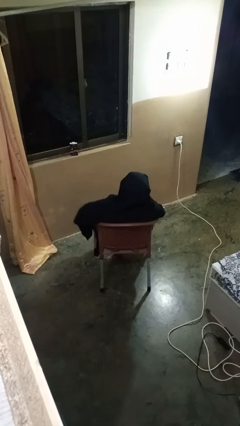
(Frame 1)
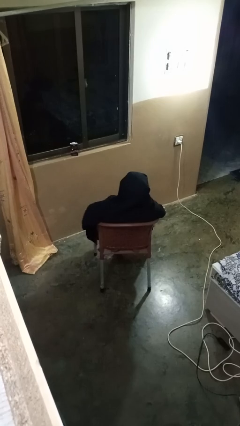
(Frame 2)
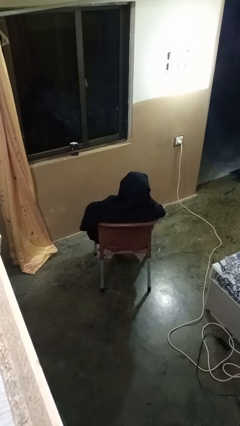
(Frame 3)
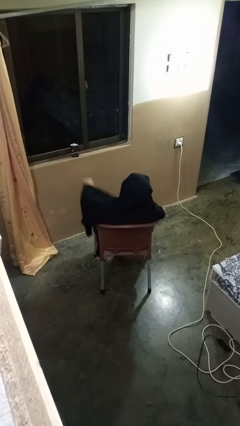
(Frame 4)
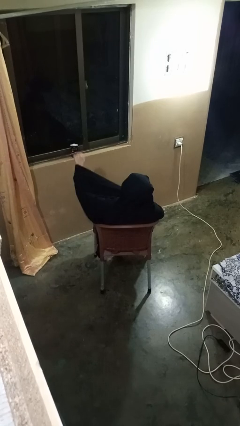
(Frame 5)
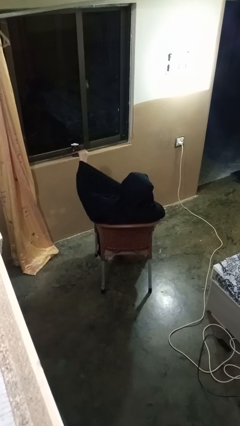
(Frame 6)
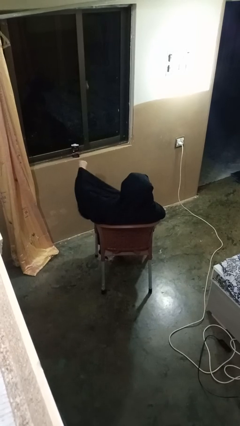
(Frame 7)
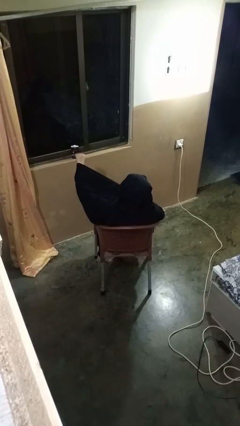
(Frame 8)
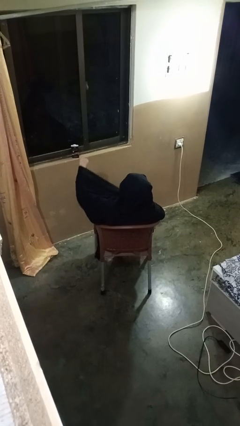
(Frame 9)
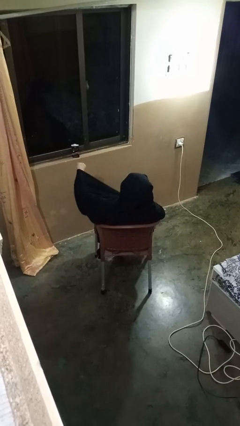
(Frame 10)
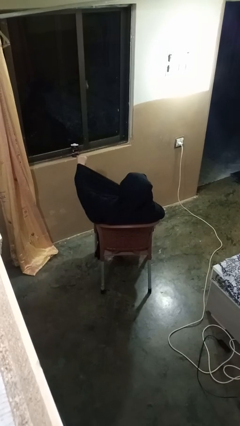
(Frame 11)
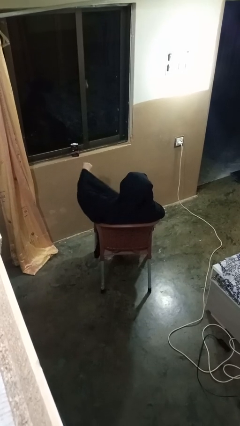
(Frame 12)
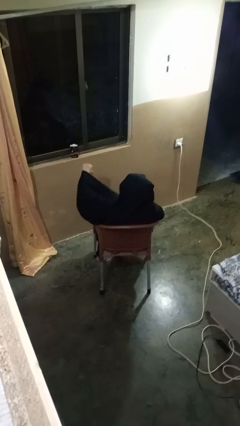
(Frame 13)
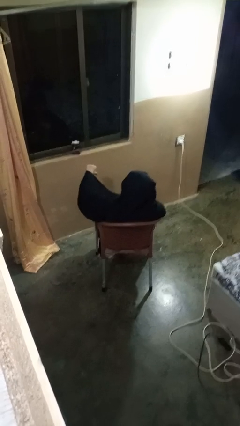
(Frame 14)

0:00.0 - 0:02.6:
person gestures thumbs down

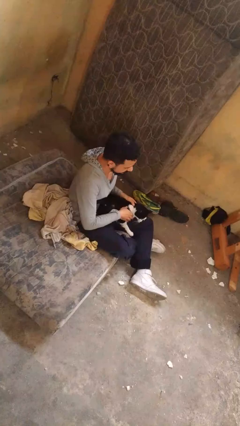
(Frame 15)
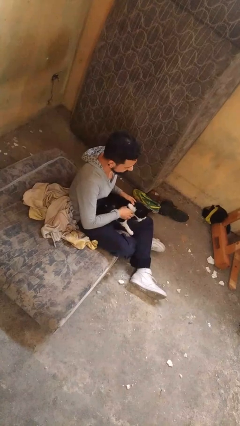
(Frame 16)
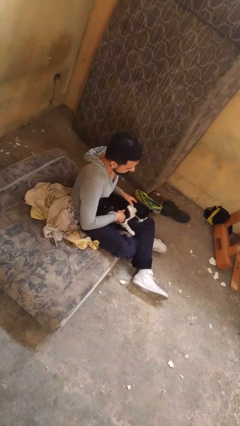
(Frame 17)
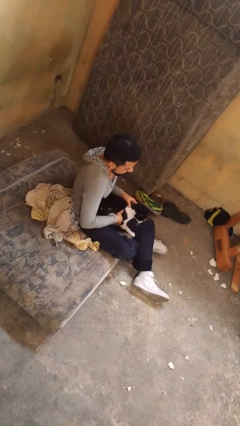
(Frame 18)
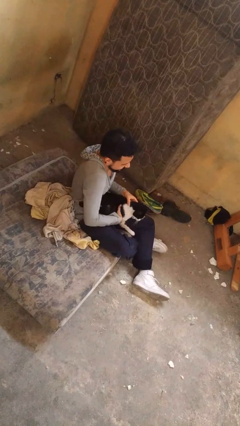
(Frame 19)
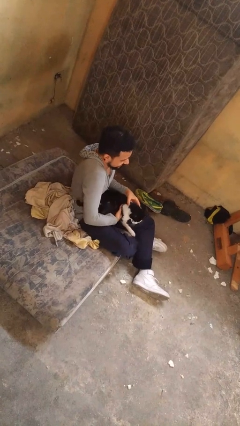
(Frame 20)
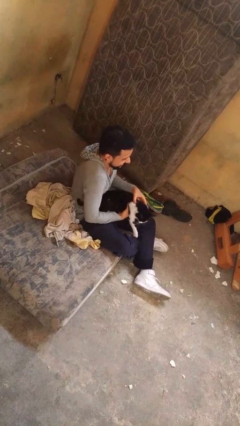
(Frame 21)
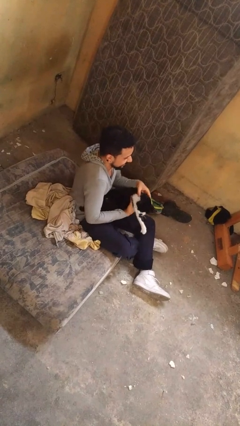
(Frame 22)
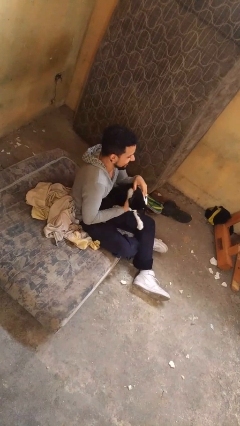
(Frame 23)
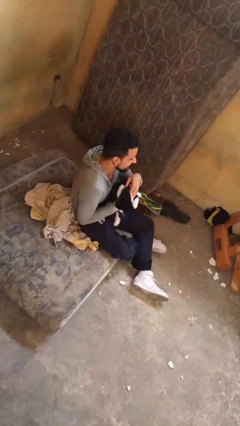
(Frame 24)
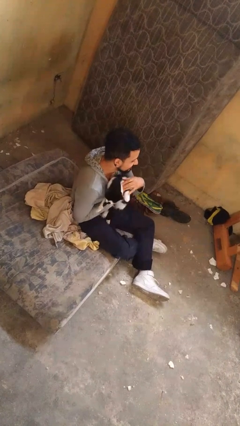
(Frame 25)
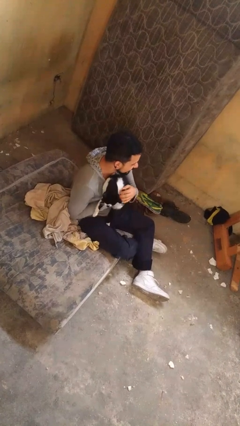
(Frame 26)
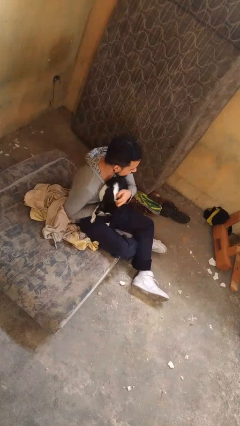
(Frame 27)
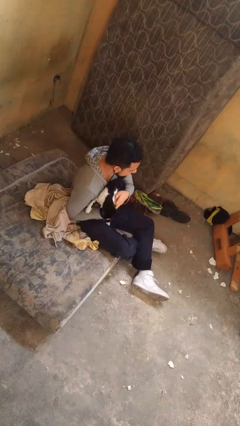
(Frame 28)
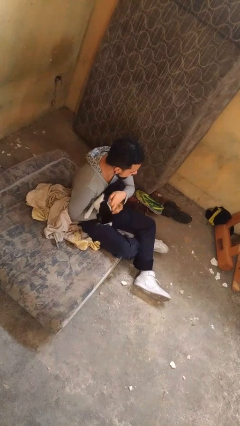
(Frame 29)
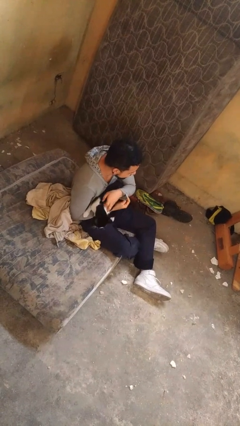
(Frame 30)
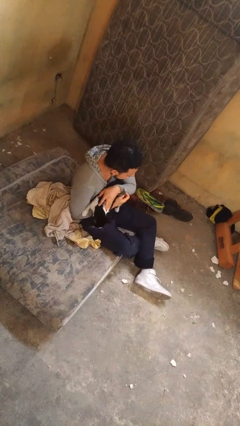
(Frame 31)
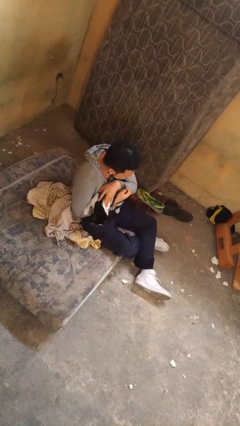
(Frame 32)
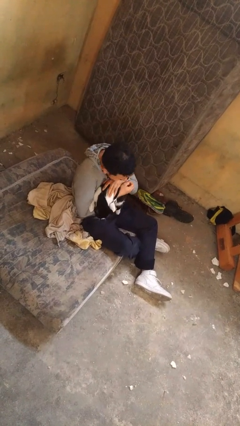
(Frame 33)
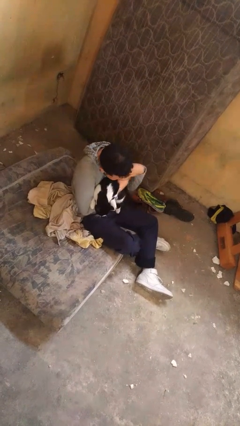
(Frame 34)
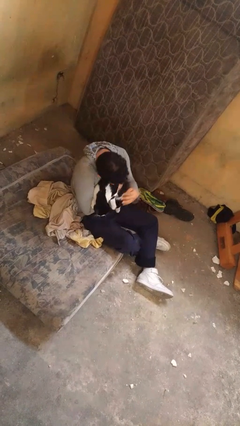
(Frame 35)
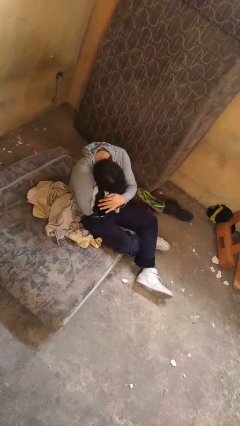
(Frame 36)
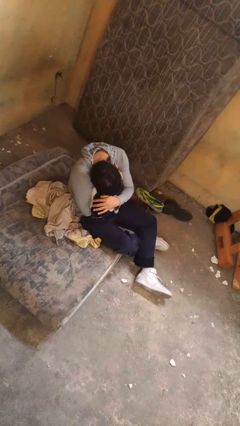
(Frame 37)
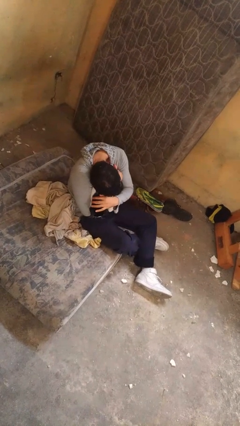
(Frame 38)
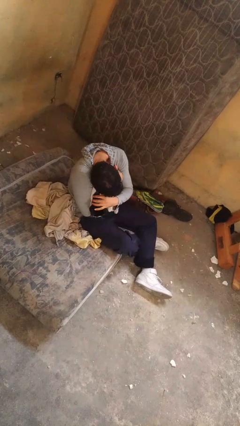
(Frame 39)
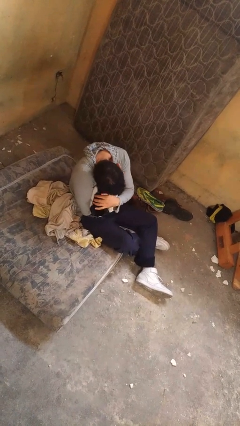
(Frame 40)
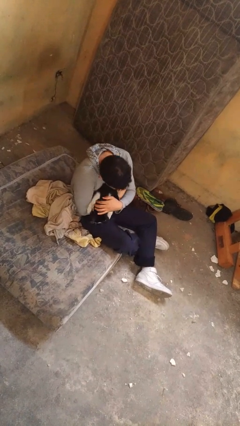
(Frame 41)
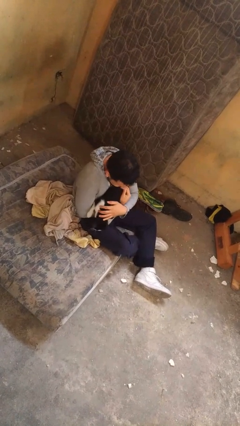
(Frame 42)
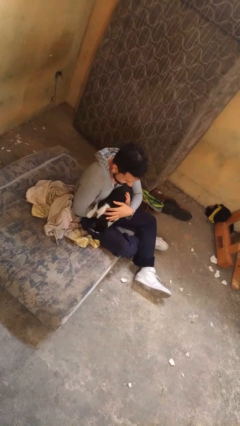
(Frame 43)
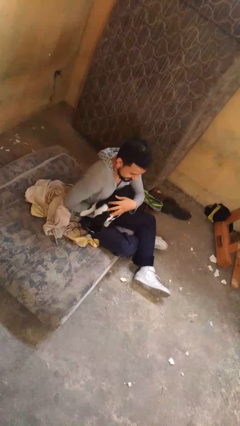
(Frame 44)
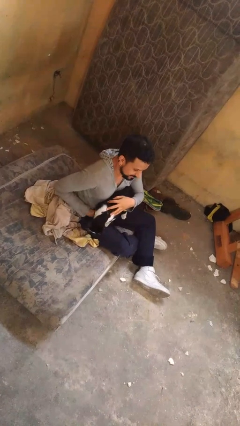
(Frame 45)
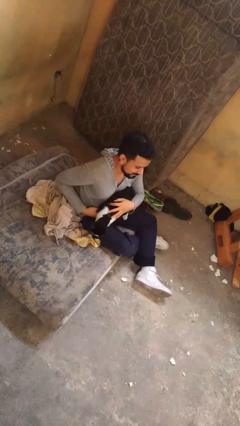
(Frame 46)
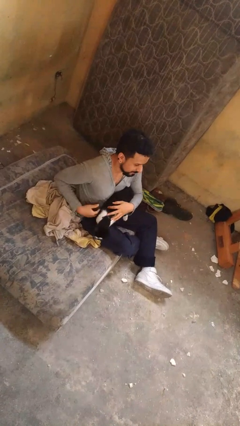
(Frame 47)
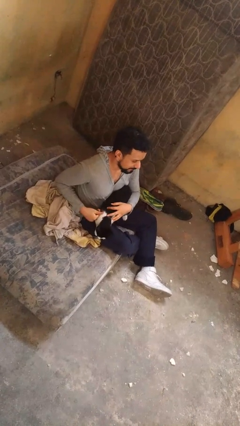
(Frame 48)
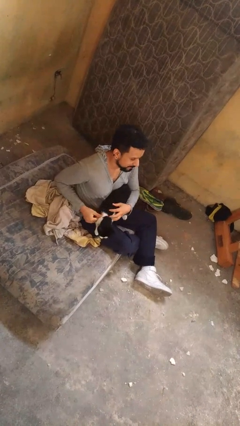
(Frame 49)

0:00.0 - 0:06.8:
person hugs cat

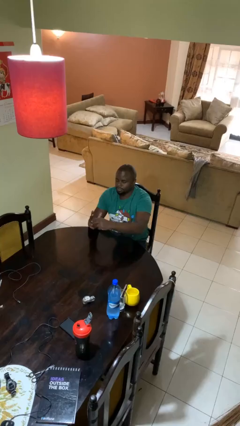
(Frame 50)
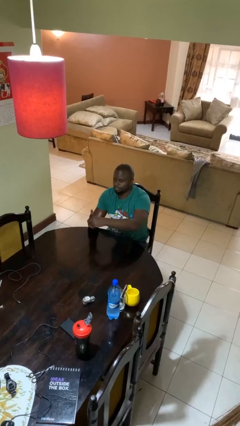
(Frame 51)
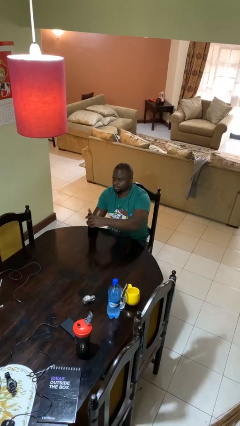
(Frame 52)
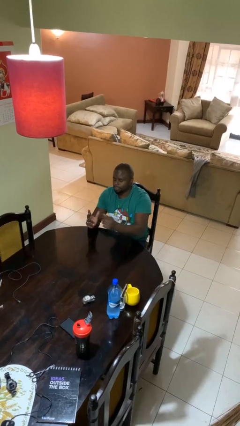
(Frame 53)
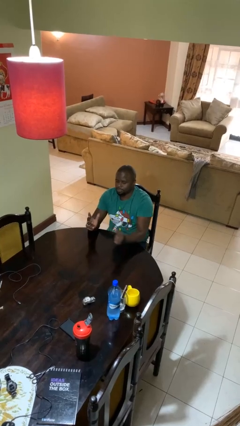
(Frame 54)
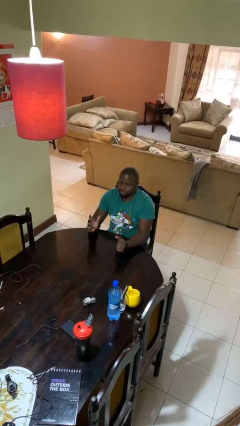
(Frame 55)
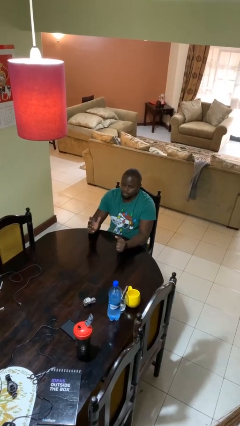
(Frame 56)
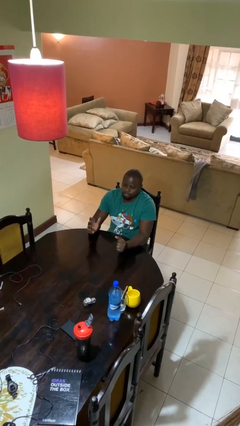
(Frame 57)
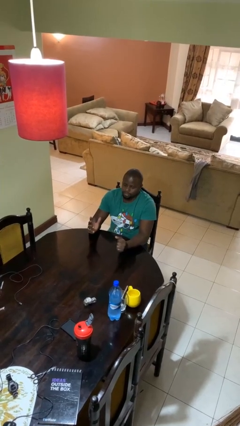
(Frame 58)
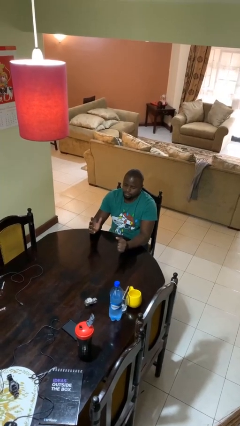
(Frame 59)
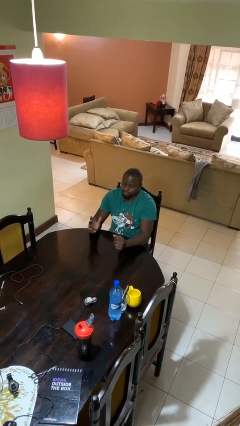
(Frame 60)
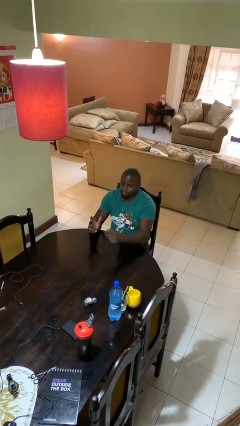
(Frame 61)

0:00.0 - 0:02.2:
person puts on ring

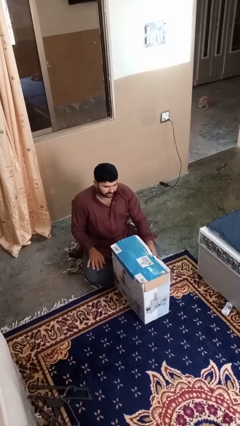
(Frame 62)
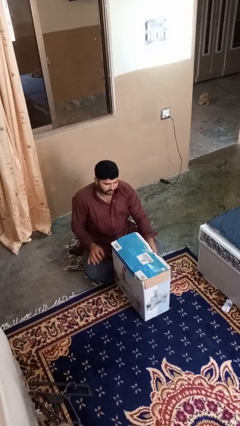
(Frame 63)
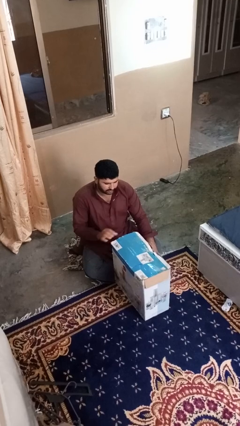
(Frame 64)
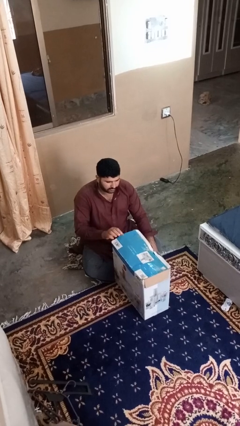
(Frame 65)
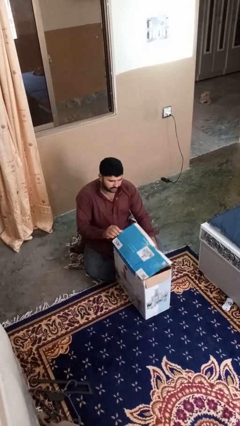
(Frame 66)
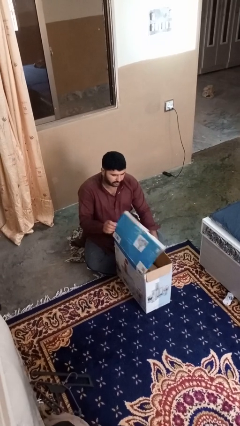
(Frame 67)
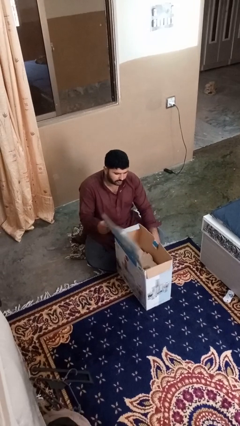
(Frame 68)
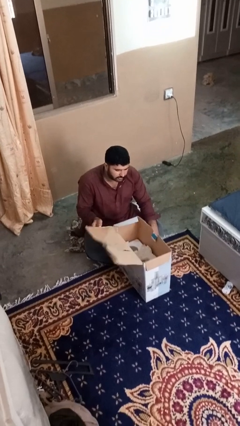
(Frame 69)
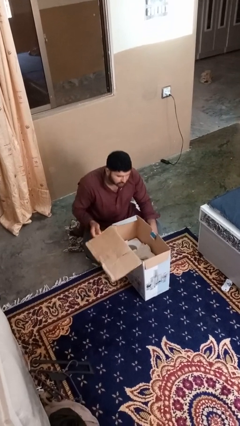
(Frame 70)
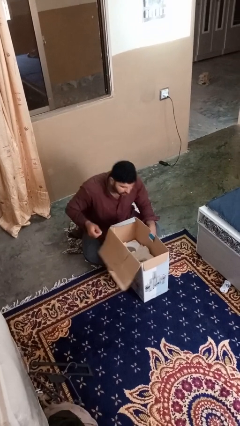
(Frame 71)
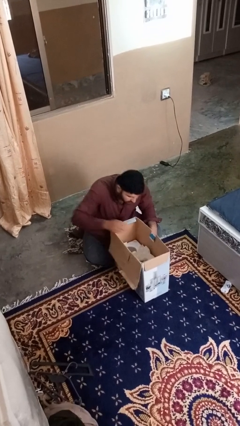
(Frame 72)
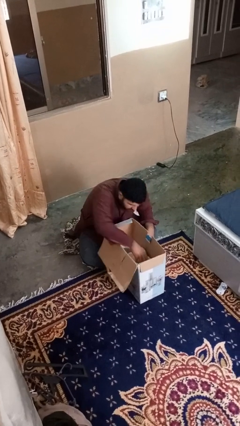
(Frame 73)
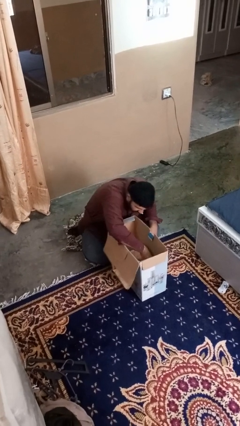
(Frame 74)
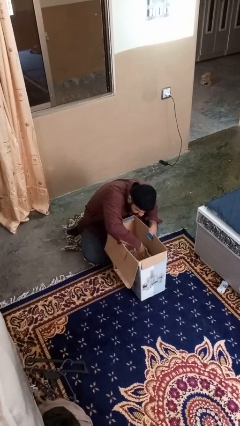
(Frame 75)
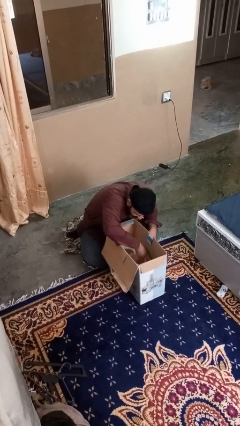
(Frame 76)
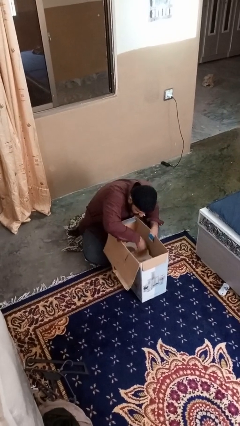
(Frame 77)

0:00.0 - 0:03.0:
person searches in box

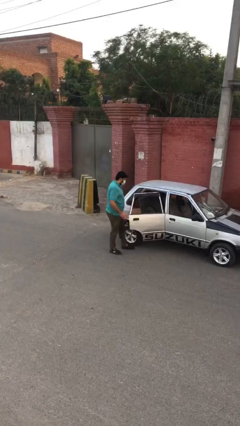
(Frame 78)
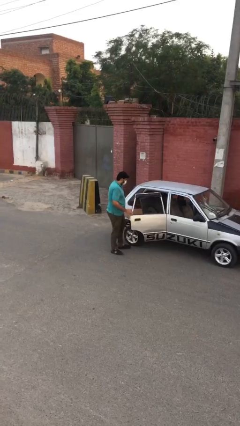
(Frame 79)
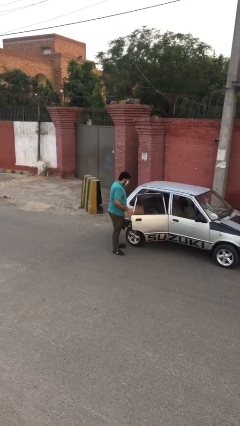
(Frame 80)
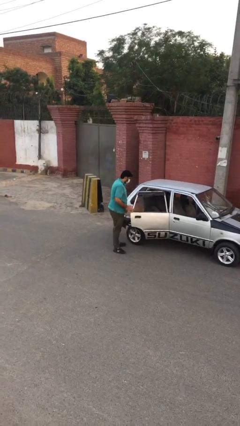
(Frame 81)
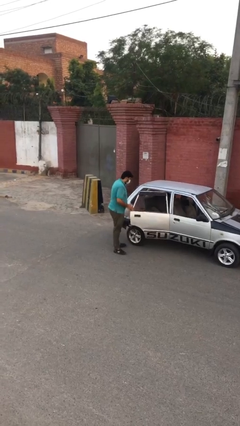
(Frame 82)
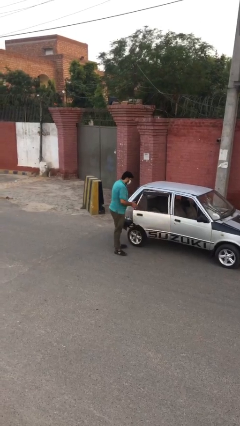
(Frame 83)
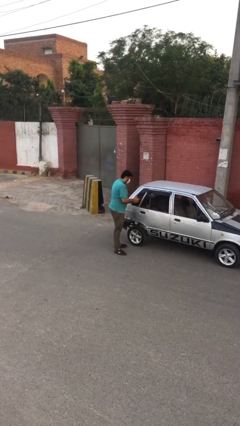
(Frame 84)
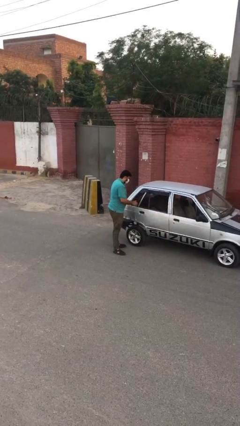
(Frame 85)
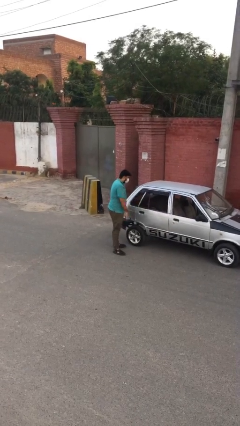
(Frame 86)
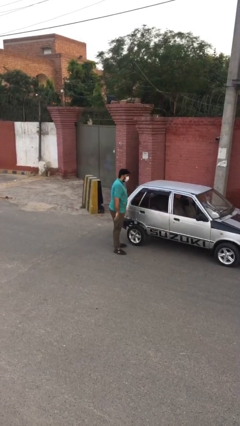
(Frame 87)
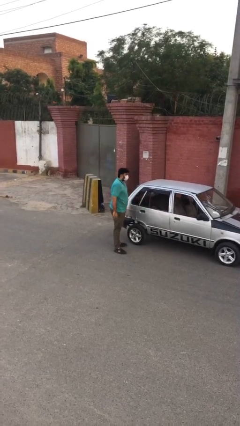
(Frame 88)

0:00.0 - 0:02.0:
person closes car door

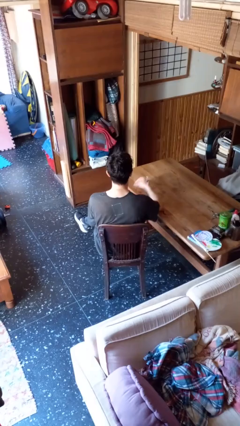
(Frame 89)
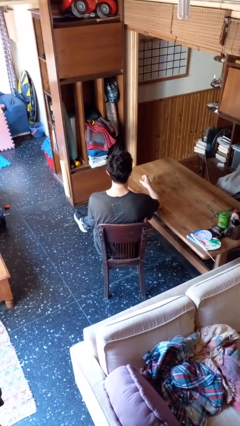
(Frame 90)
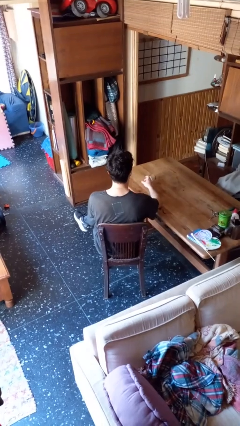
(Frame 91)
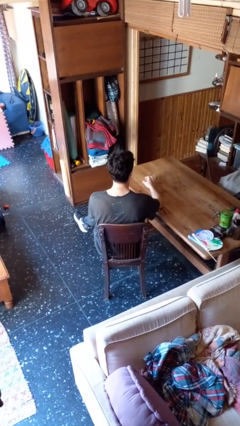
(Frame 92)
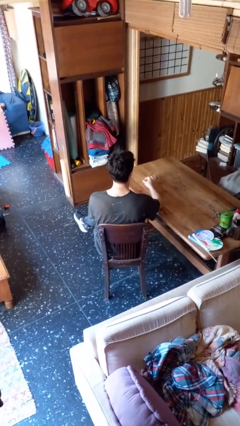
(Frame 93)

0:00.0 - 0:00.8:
person knocks over glass
